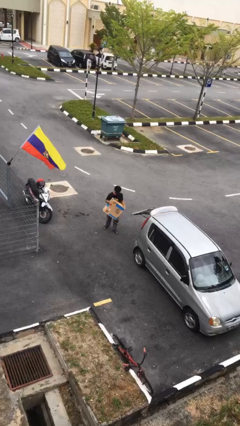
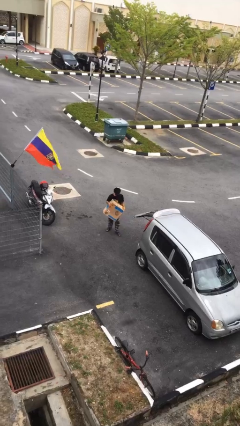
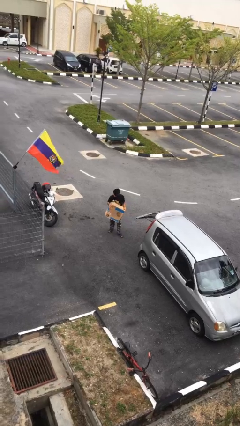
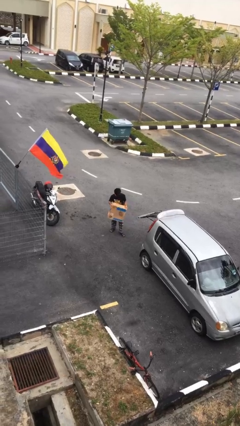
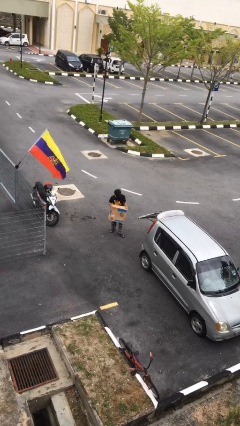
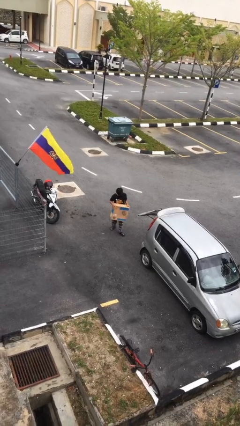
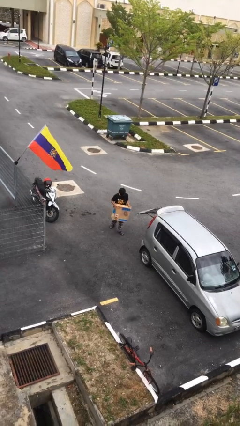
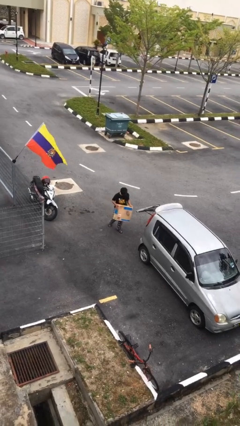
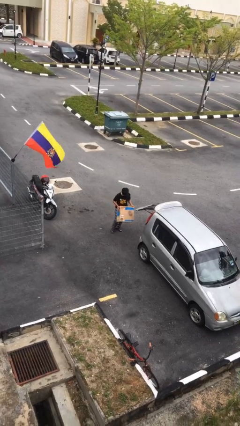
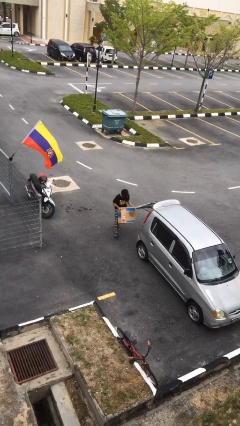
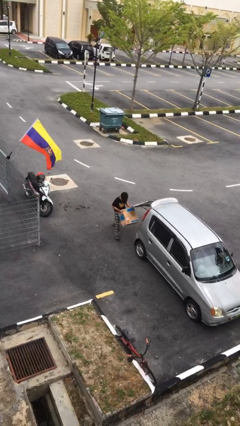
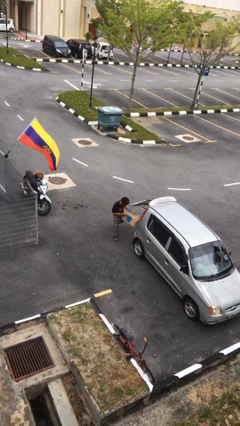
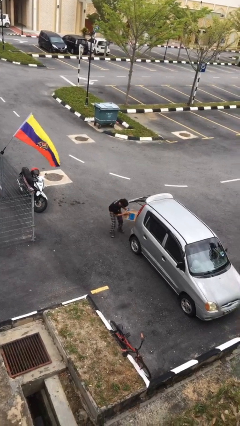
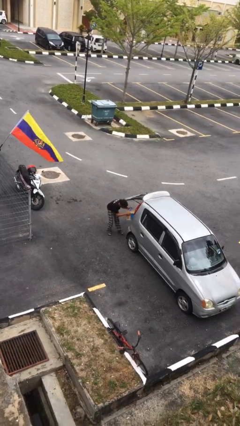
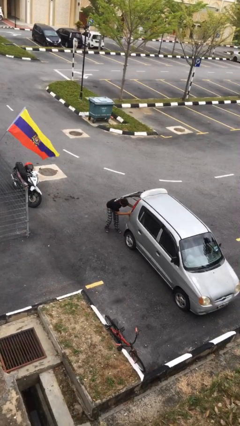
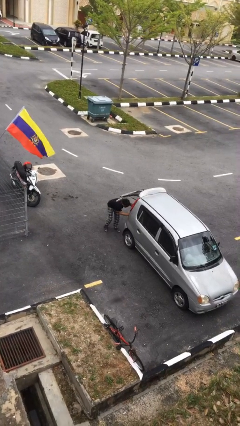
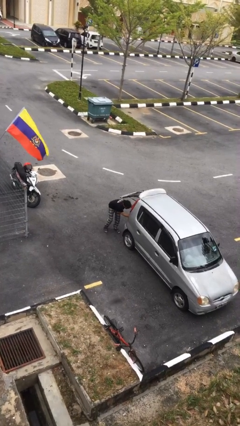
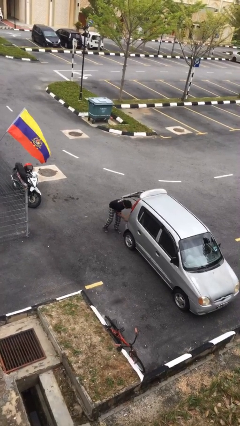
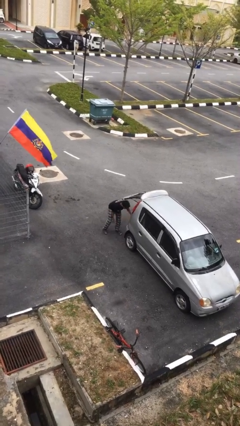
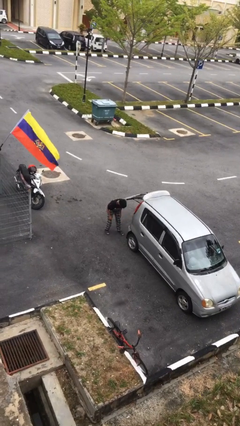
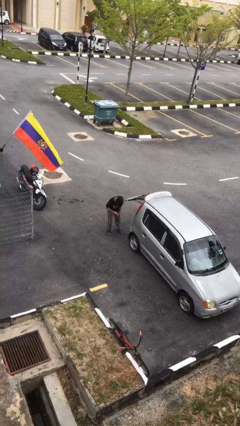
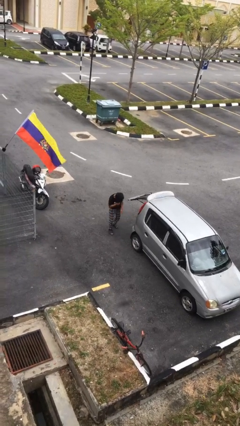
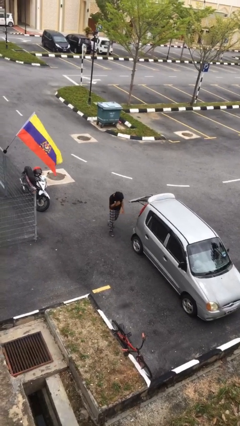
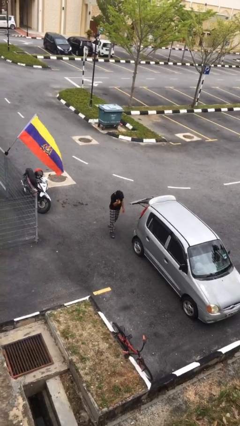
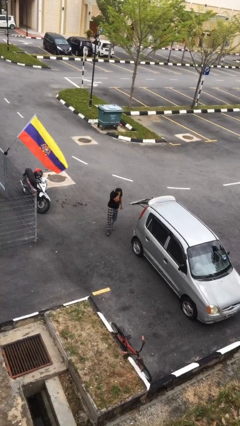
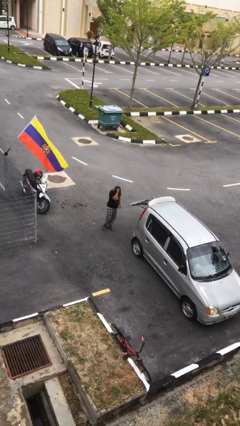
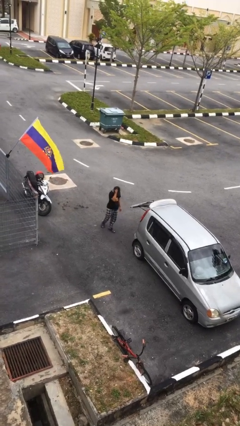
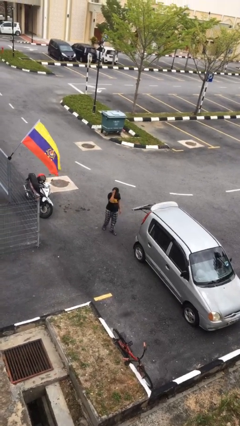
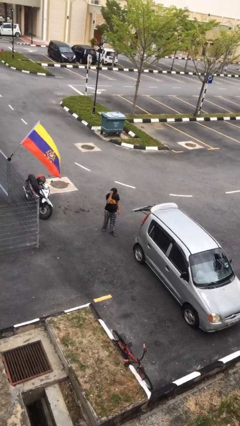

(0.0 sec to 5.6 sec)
person loads car

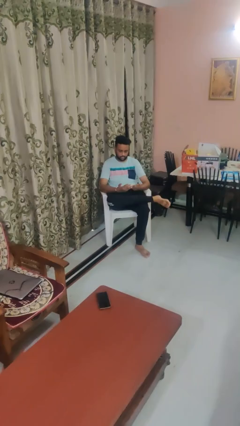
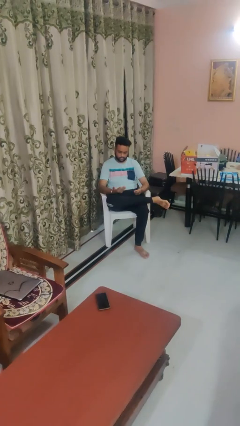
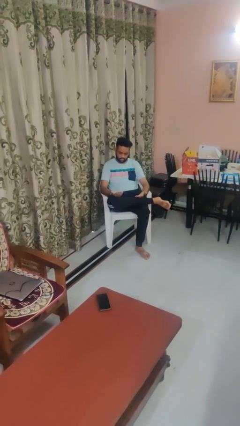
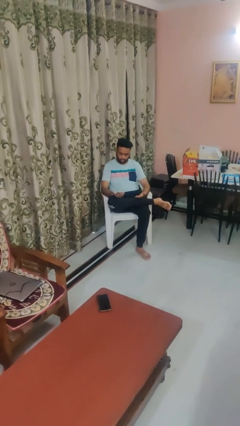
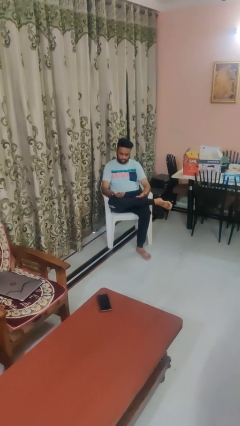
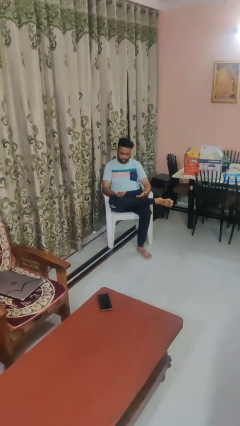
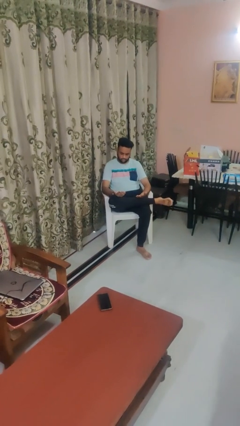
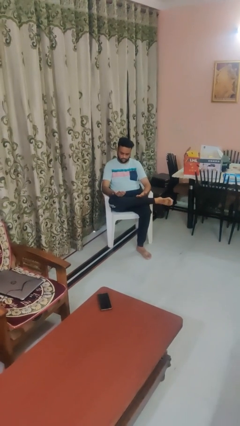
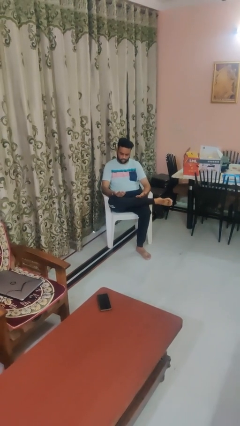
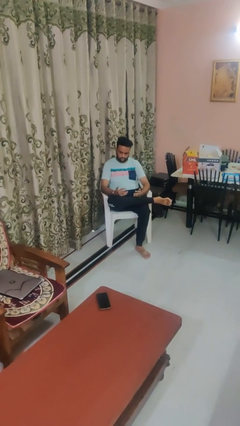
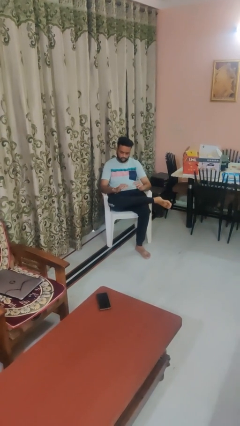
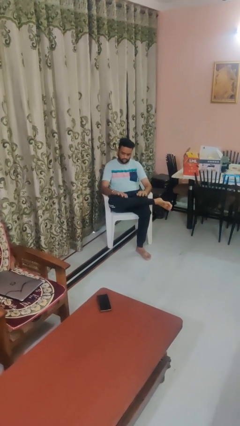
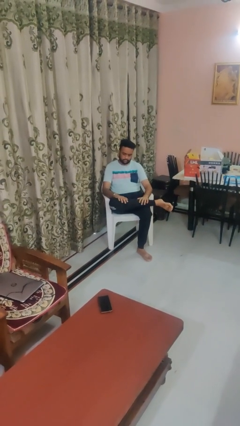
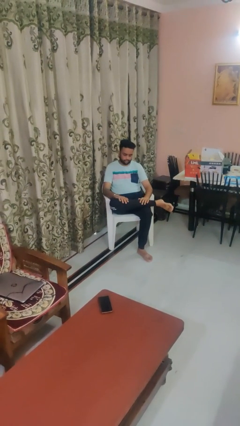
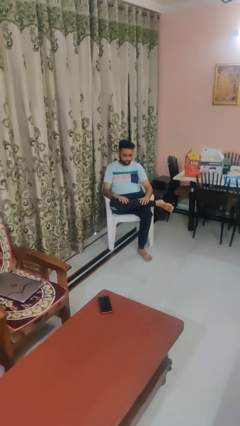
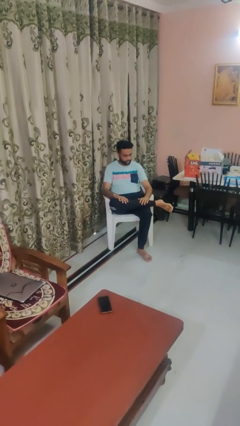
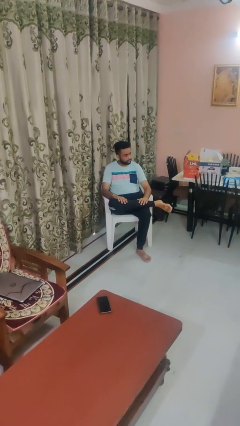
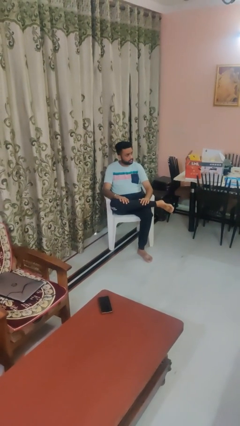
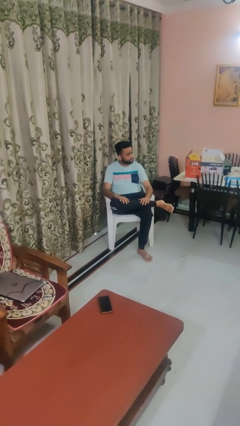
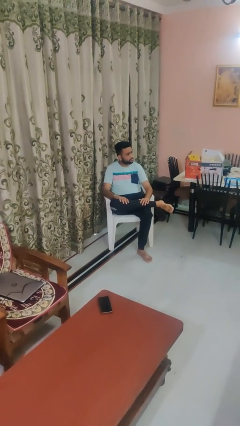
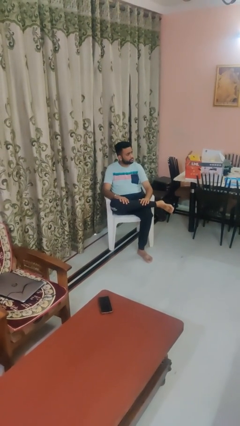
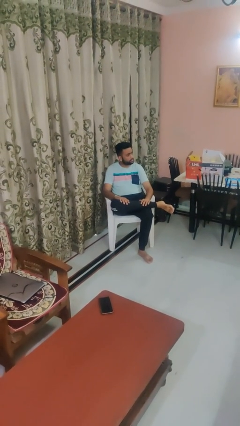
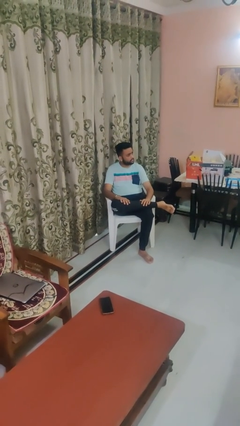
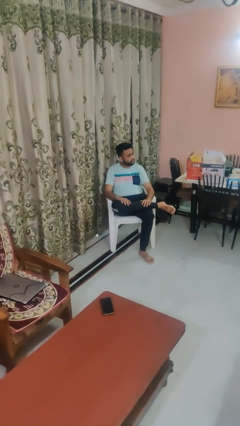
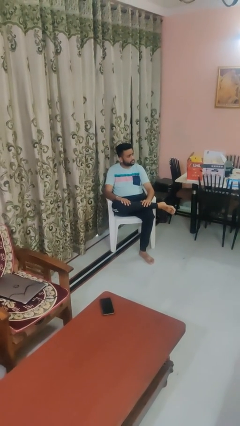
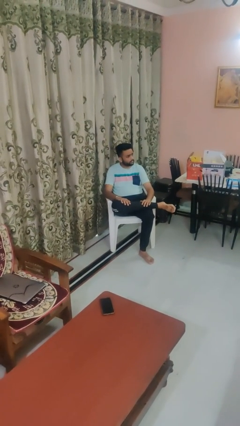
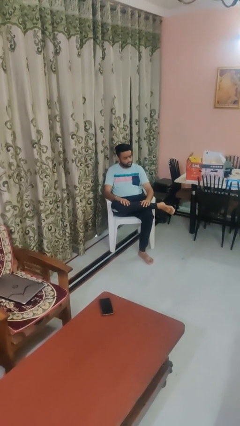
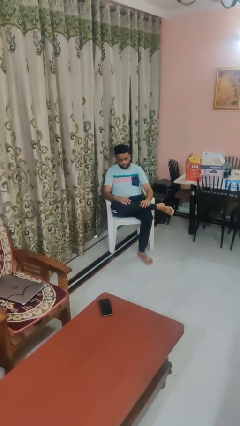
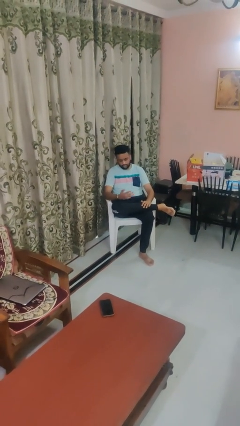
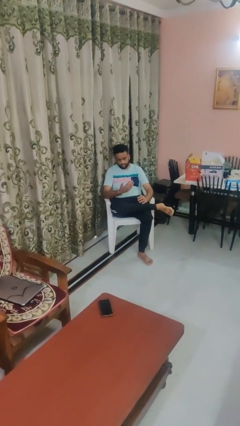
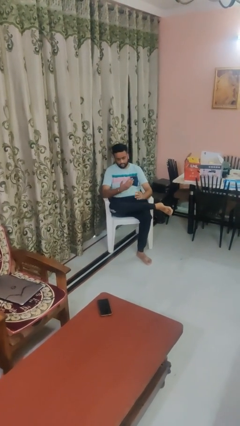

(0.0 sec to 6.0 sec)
person looks at hands in lap

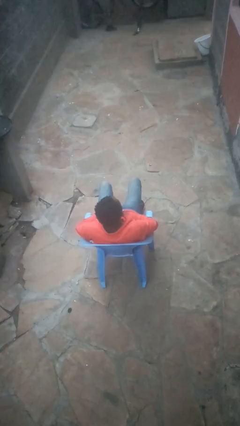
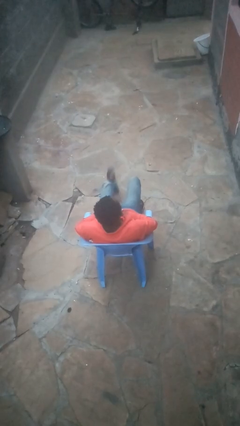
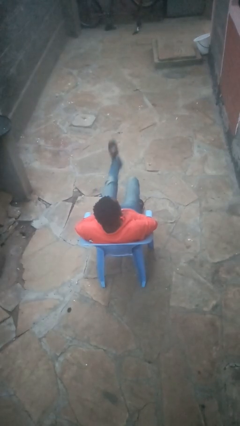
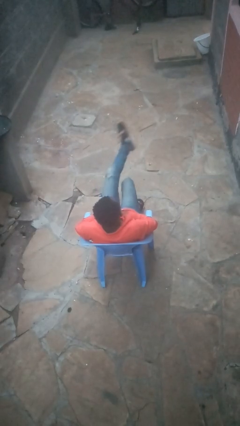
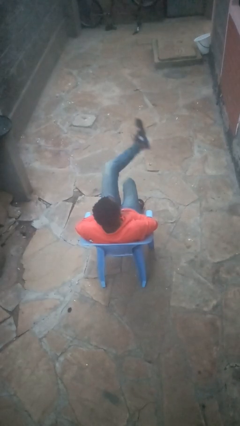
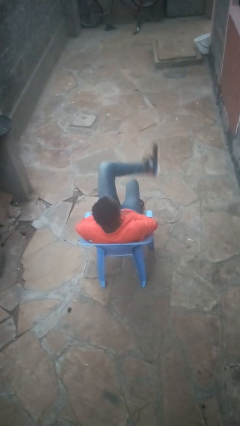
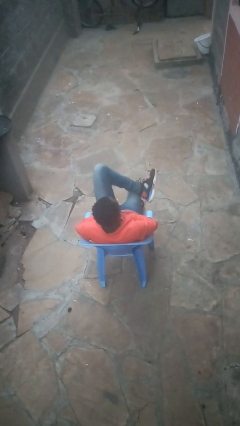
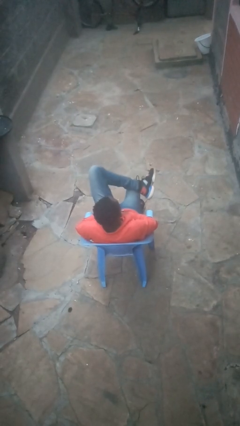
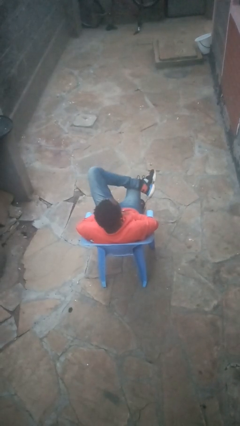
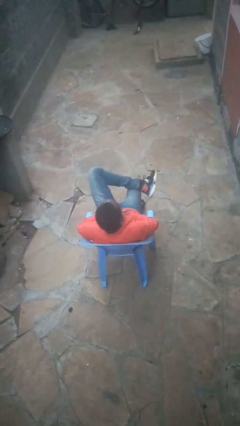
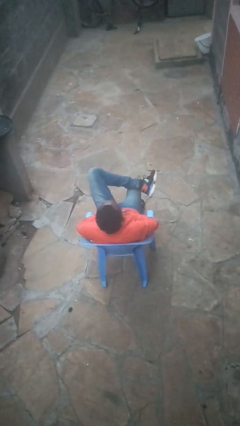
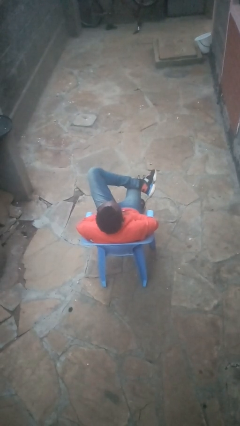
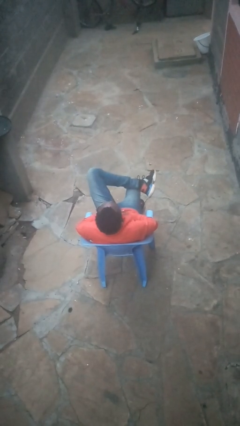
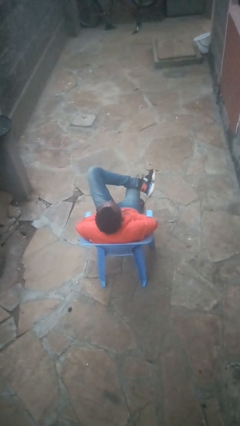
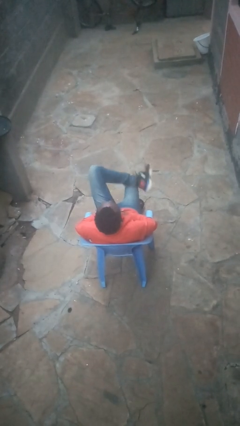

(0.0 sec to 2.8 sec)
person crosses legs

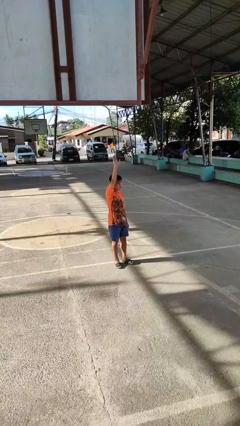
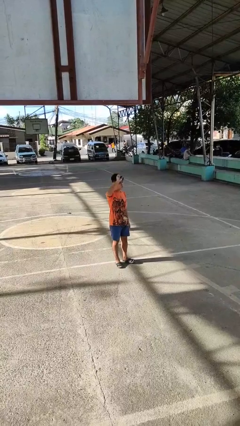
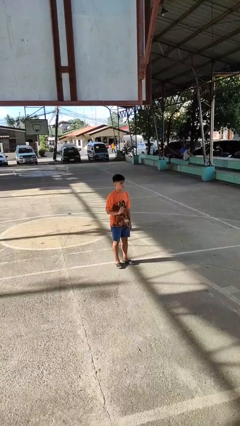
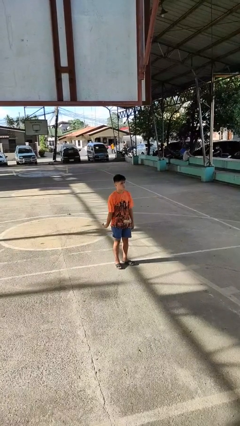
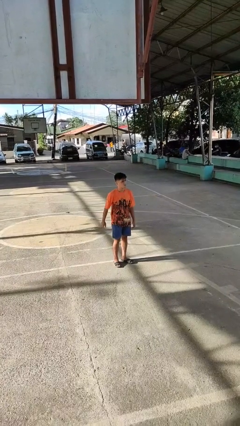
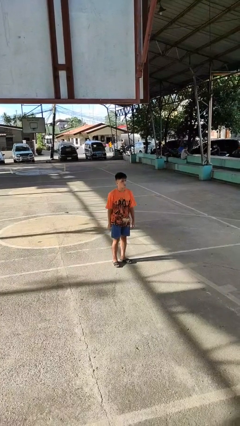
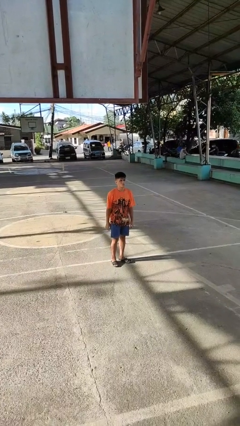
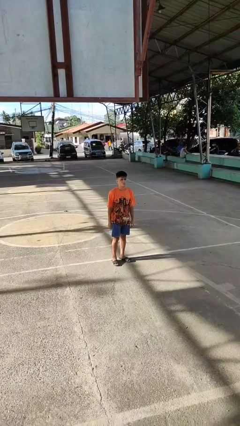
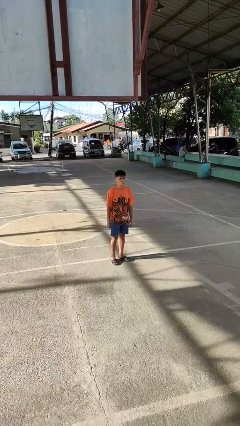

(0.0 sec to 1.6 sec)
person gestures lower hand

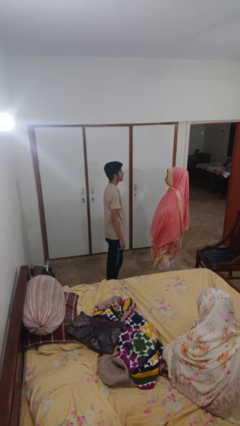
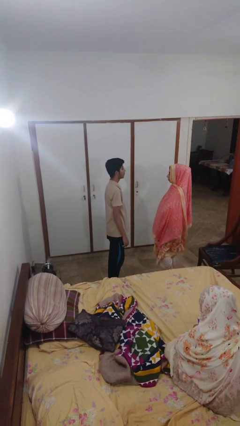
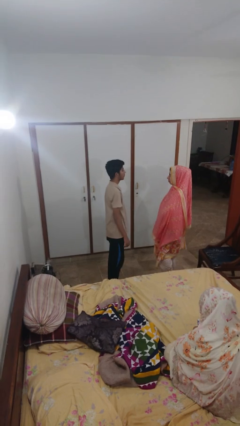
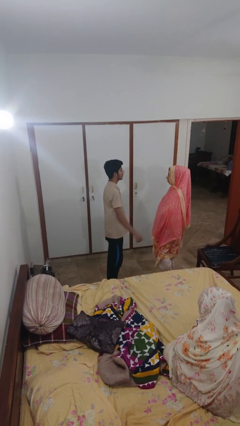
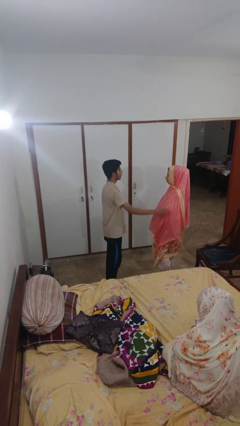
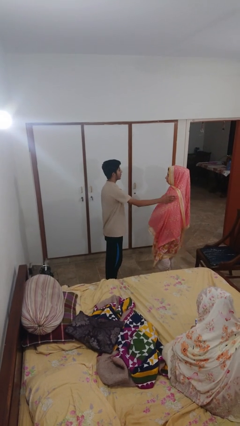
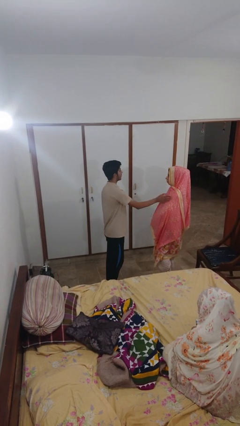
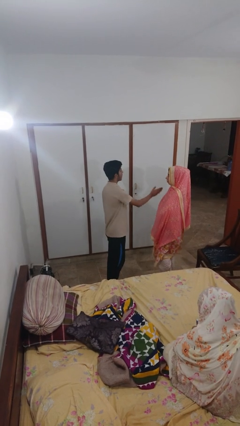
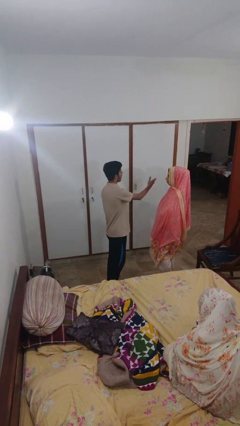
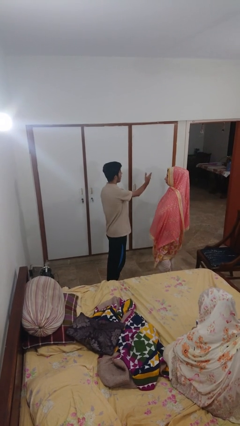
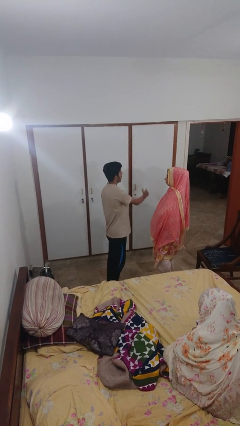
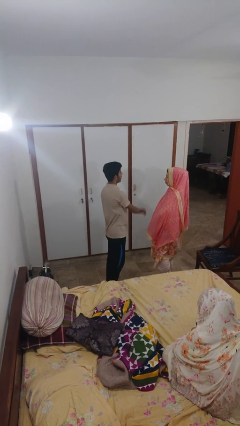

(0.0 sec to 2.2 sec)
person shoves person
